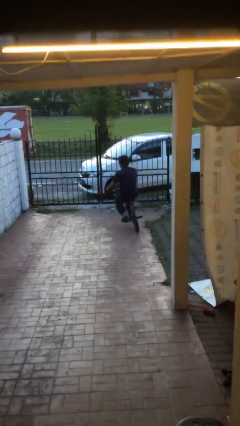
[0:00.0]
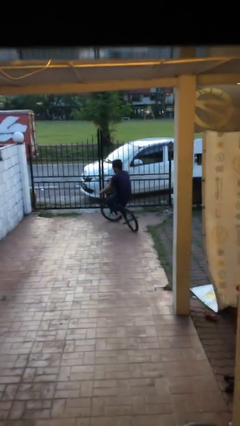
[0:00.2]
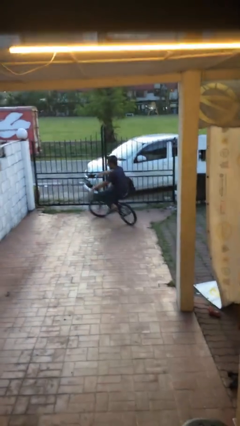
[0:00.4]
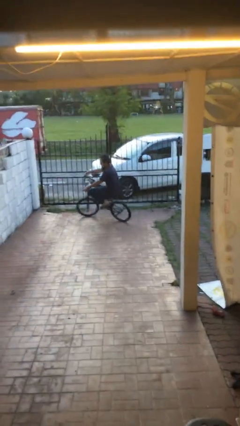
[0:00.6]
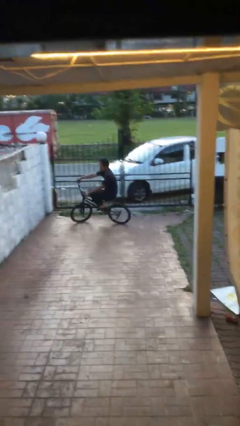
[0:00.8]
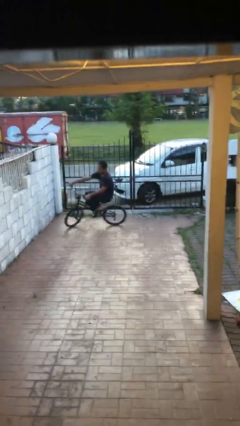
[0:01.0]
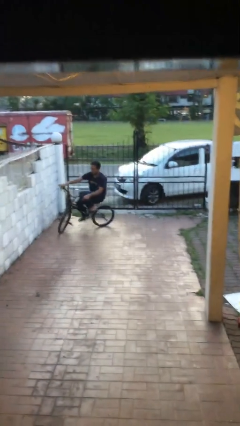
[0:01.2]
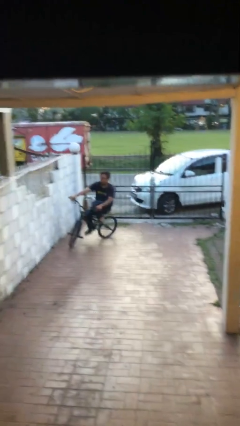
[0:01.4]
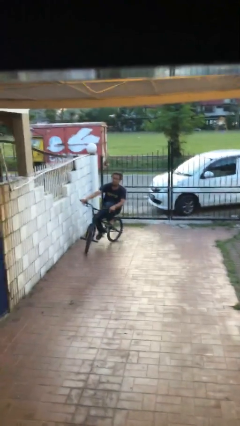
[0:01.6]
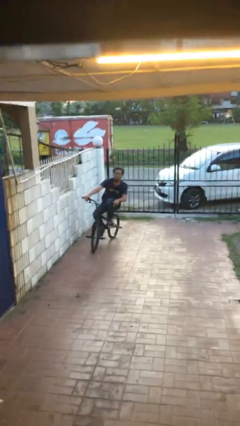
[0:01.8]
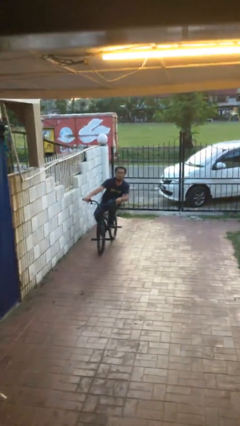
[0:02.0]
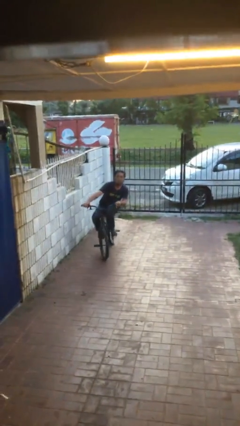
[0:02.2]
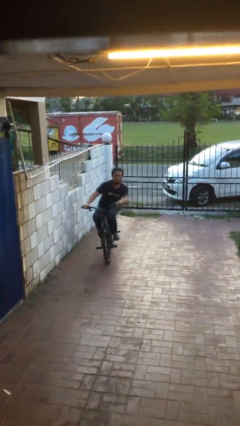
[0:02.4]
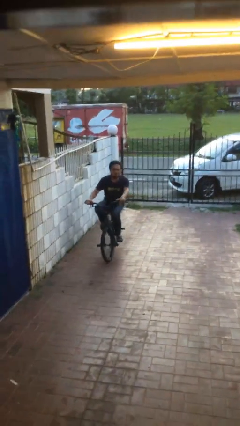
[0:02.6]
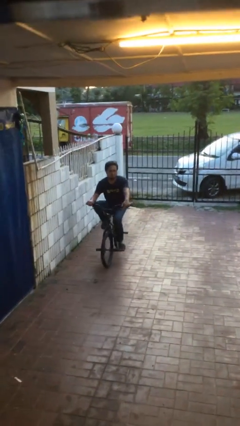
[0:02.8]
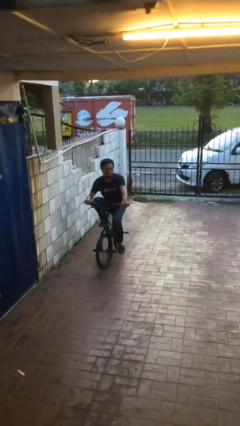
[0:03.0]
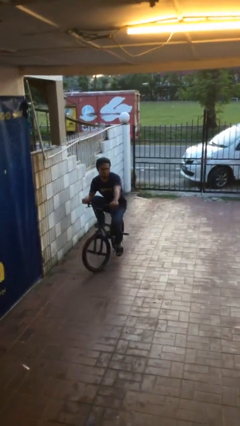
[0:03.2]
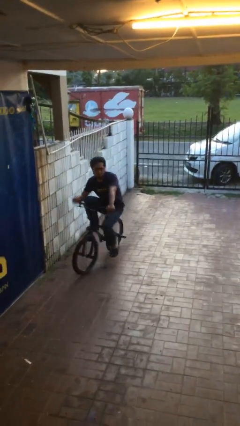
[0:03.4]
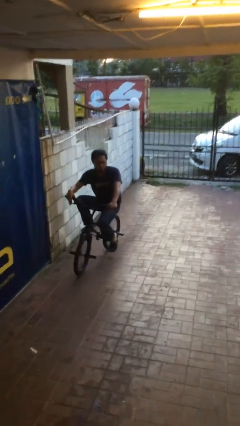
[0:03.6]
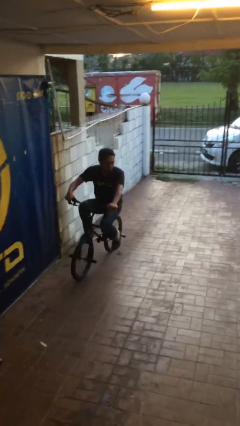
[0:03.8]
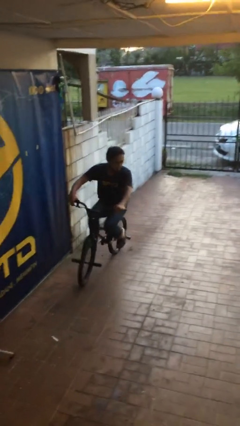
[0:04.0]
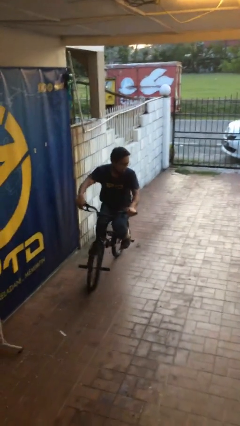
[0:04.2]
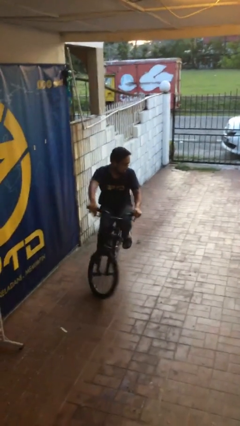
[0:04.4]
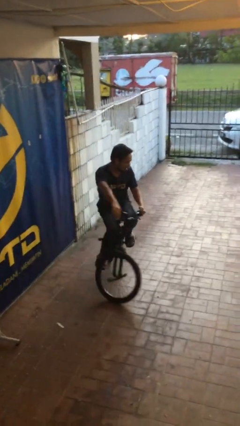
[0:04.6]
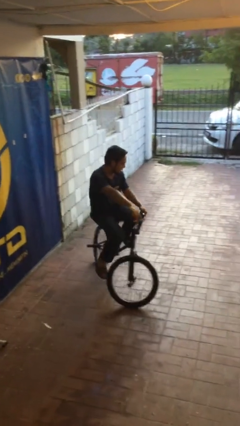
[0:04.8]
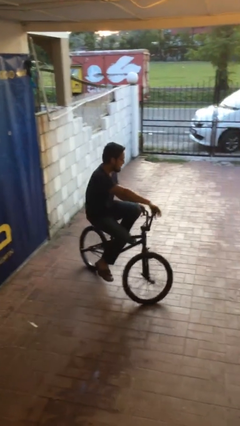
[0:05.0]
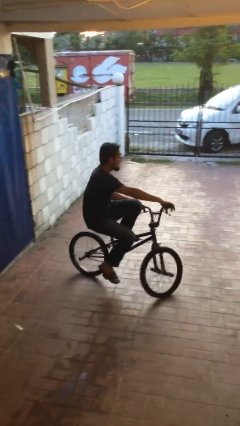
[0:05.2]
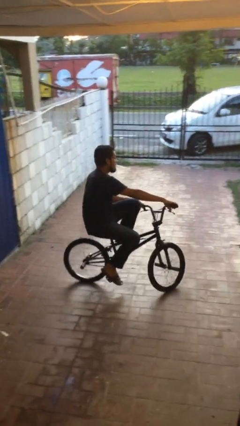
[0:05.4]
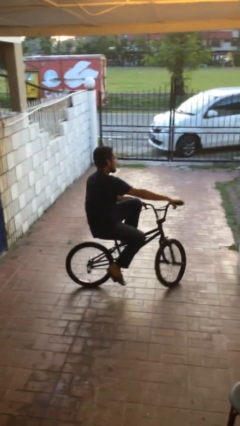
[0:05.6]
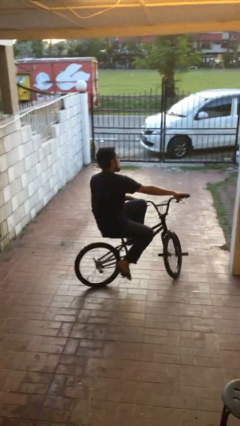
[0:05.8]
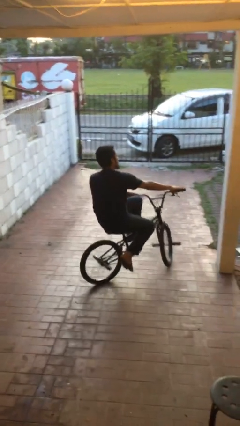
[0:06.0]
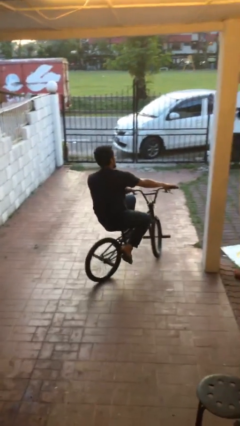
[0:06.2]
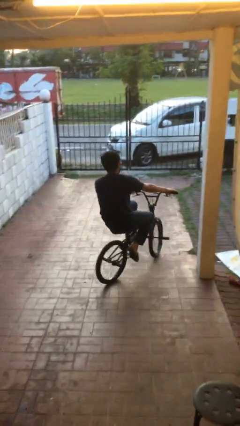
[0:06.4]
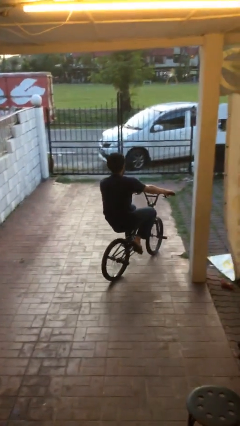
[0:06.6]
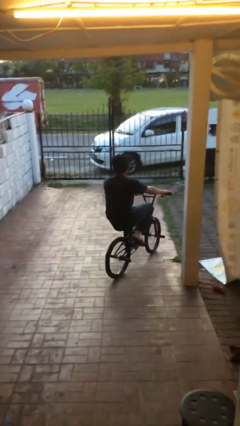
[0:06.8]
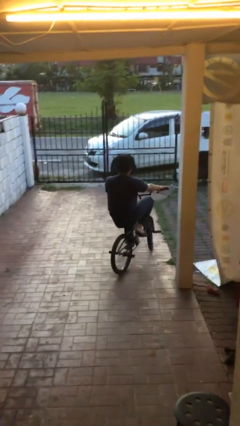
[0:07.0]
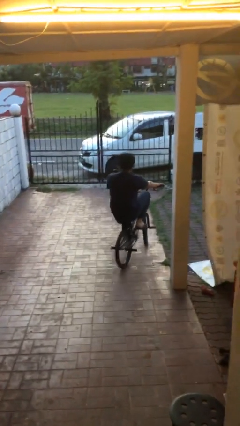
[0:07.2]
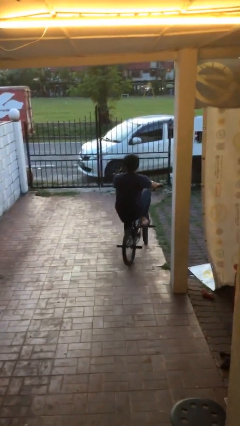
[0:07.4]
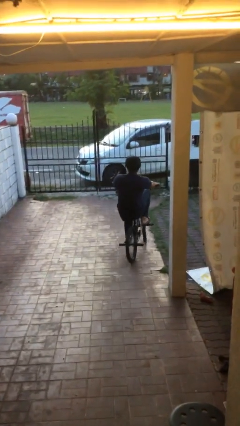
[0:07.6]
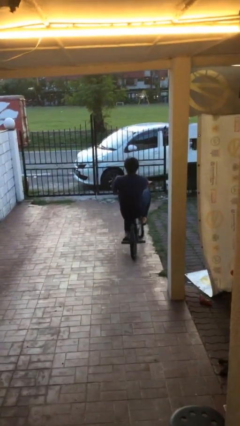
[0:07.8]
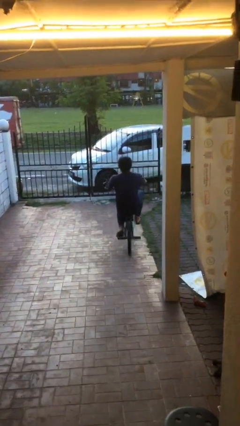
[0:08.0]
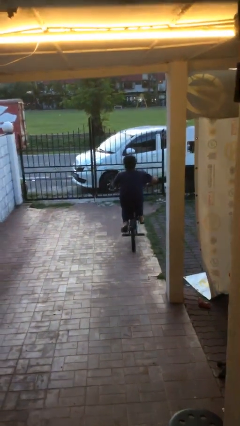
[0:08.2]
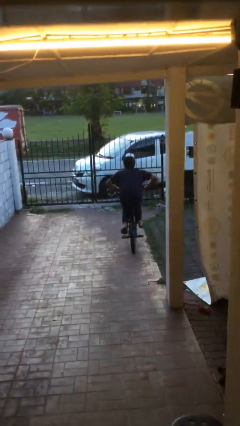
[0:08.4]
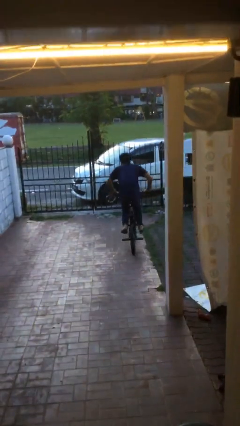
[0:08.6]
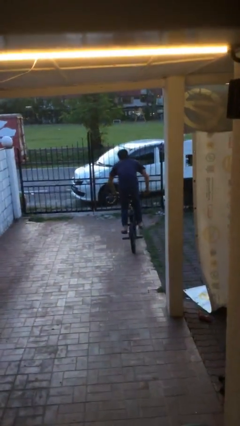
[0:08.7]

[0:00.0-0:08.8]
person rides bicycle

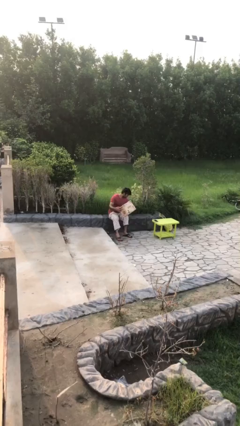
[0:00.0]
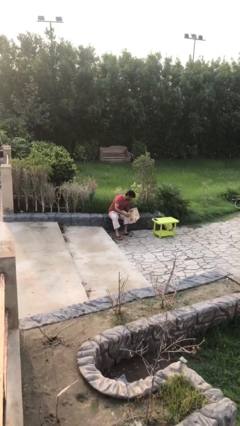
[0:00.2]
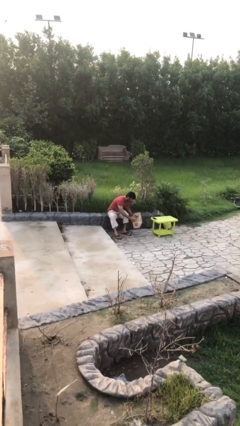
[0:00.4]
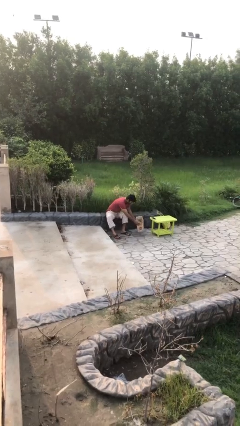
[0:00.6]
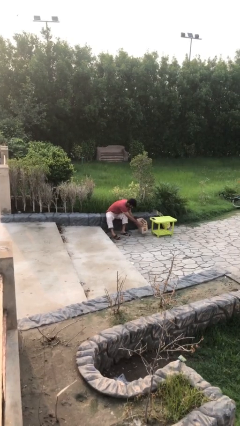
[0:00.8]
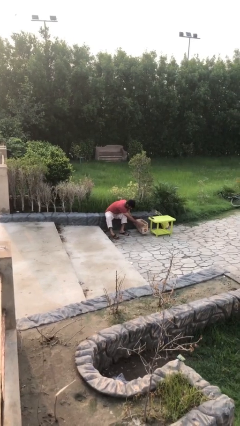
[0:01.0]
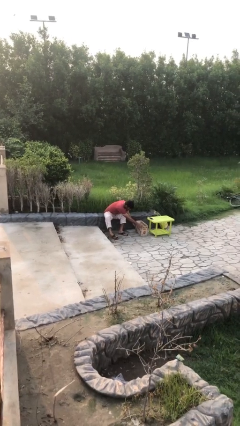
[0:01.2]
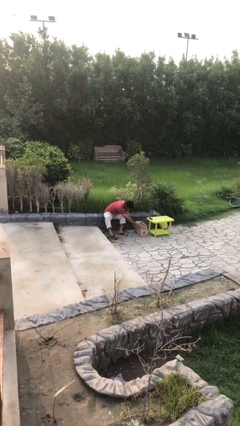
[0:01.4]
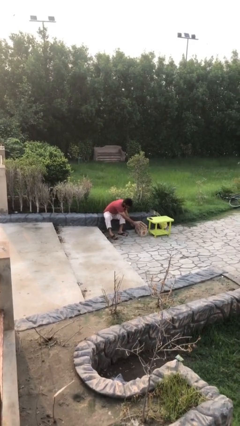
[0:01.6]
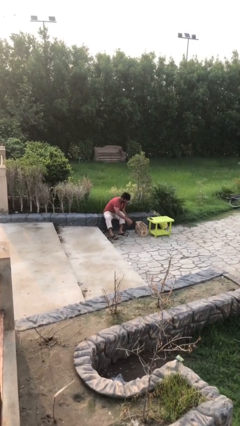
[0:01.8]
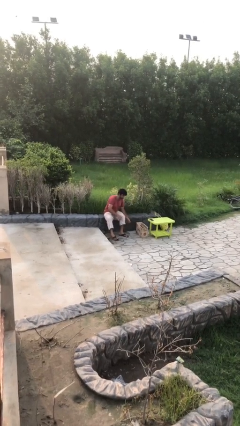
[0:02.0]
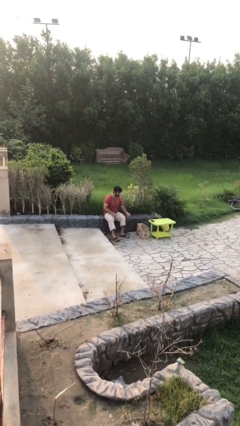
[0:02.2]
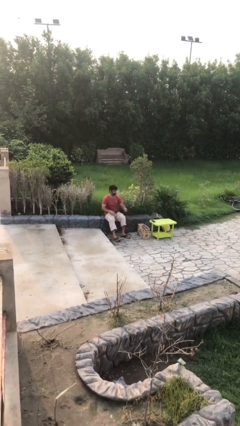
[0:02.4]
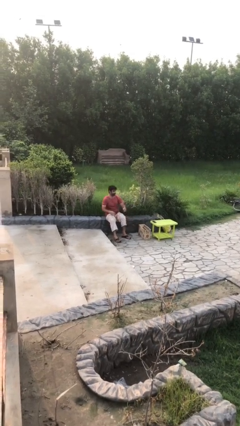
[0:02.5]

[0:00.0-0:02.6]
person puts down object on floor

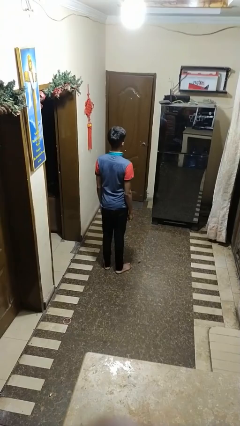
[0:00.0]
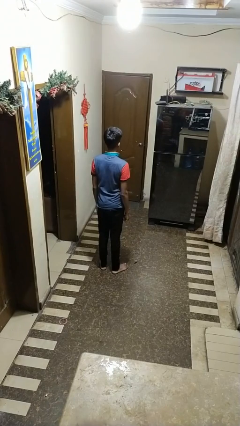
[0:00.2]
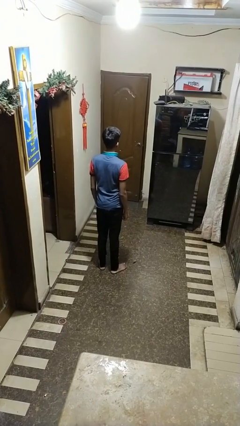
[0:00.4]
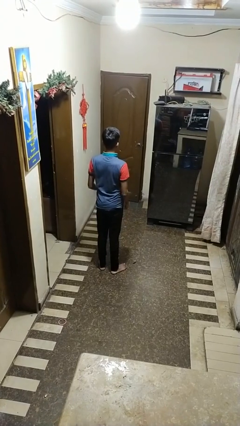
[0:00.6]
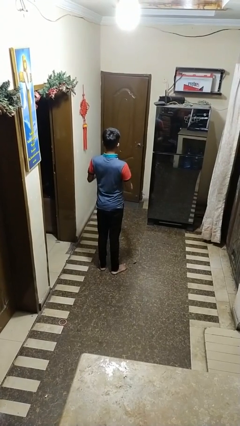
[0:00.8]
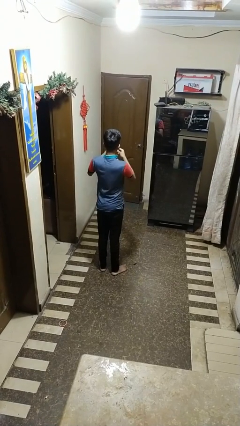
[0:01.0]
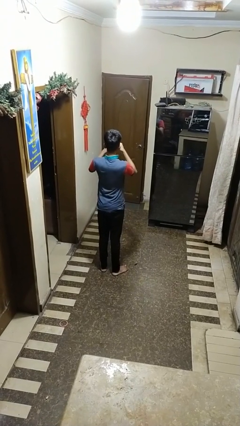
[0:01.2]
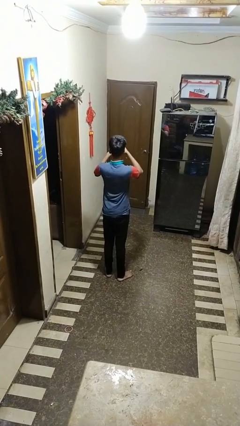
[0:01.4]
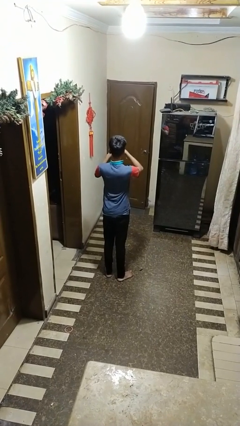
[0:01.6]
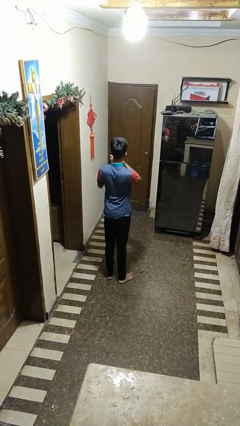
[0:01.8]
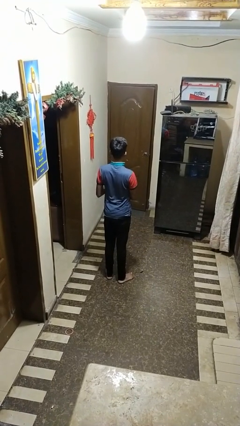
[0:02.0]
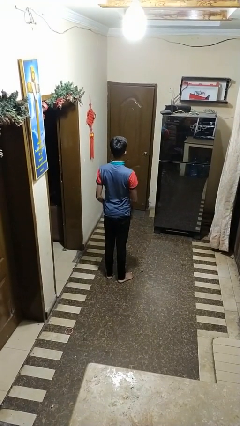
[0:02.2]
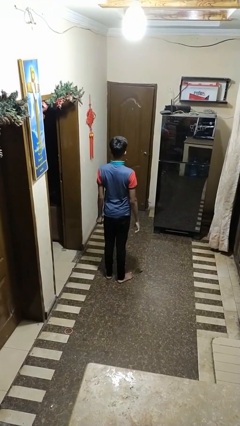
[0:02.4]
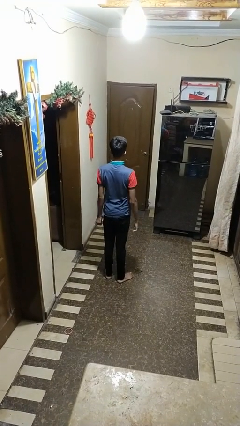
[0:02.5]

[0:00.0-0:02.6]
person puts on ring

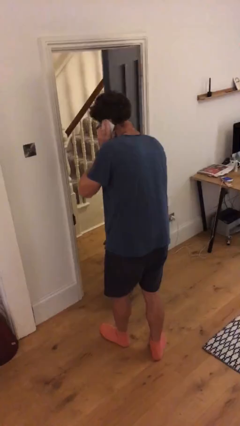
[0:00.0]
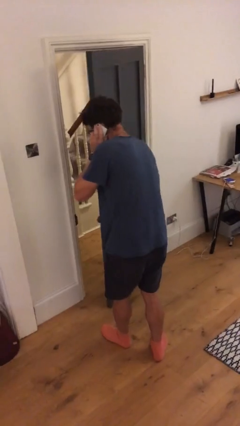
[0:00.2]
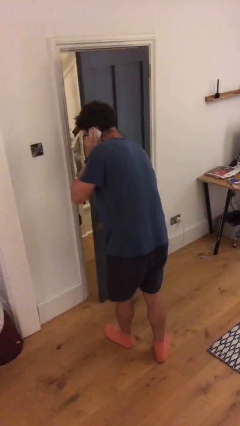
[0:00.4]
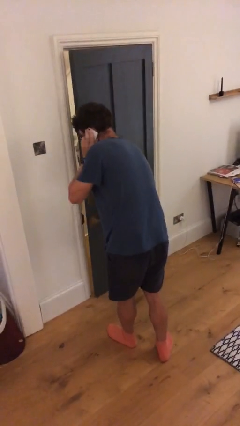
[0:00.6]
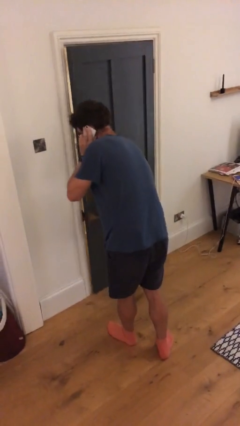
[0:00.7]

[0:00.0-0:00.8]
person closes facility door

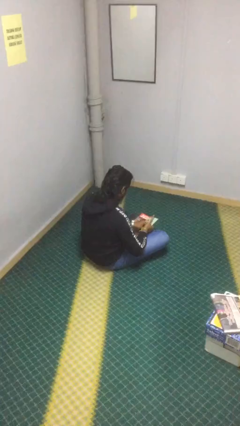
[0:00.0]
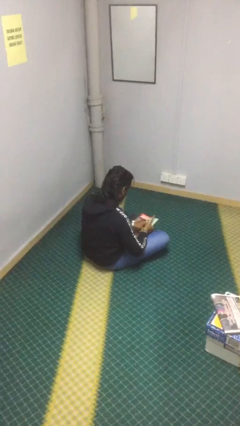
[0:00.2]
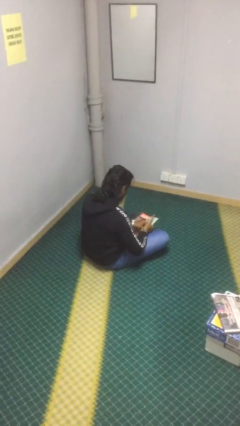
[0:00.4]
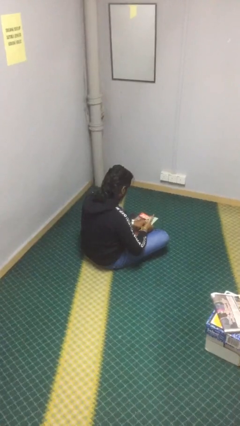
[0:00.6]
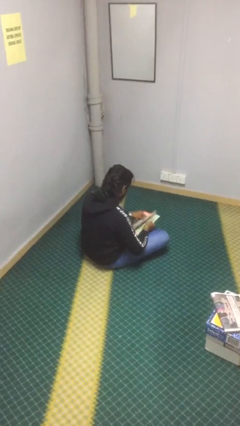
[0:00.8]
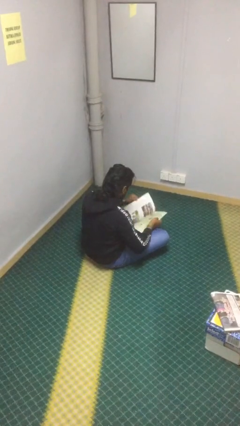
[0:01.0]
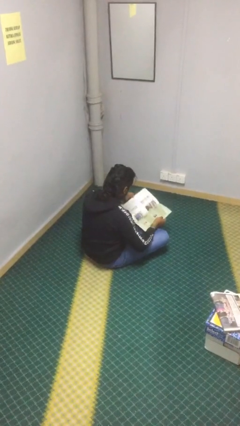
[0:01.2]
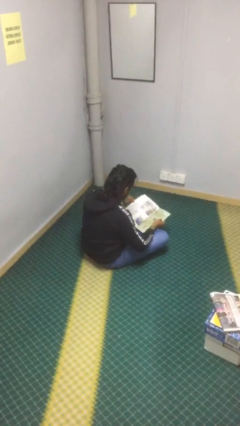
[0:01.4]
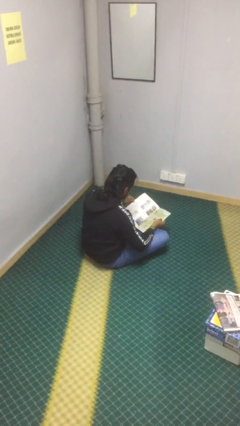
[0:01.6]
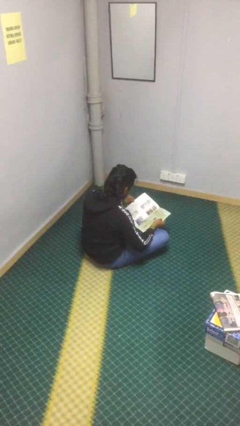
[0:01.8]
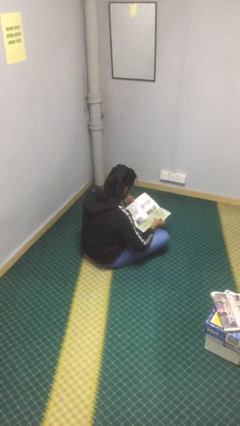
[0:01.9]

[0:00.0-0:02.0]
person reads magazine

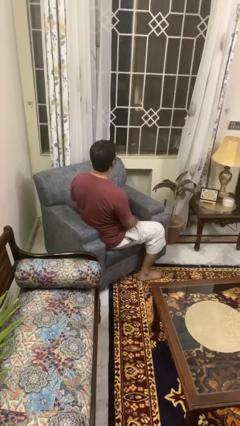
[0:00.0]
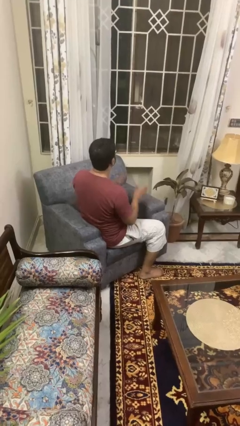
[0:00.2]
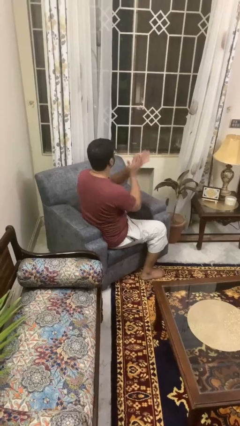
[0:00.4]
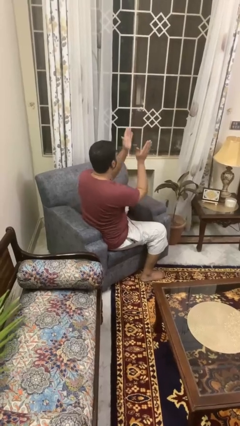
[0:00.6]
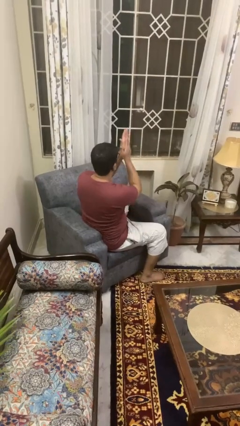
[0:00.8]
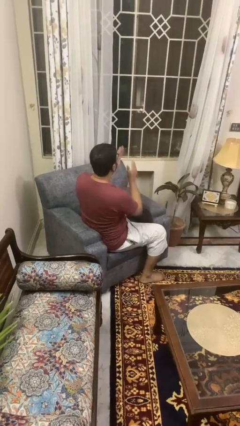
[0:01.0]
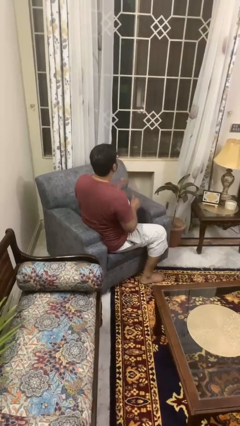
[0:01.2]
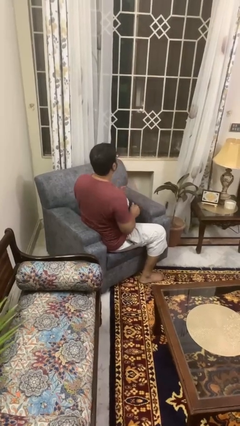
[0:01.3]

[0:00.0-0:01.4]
person swats bug
